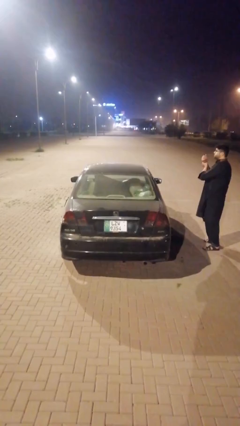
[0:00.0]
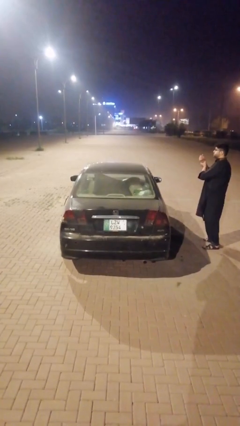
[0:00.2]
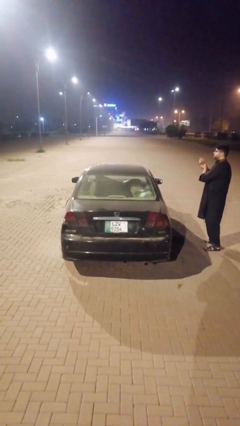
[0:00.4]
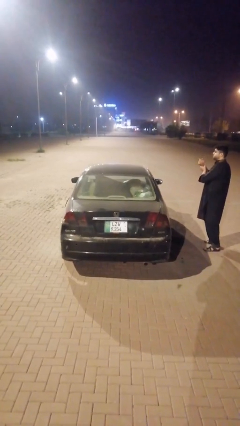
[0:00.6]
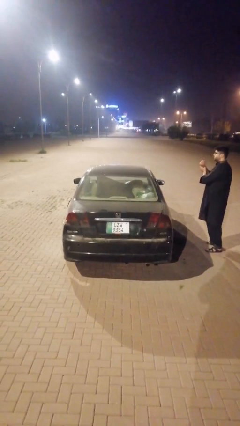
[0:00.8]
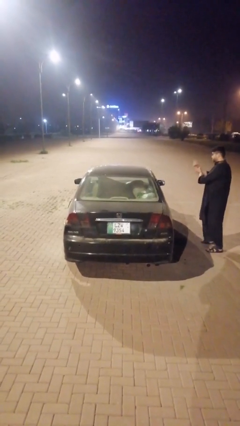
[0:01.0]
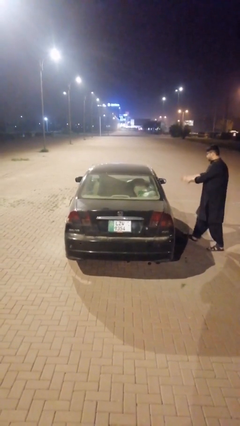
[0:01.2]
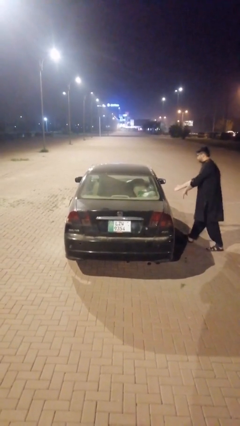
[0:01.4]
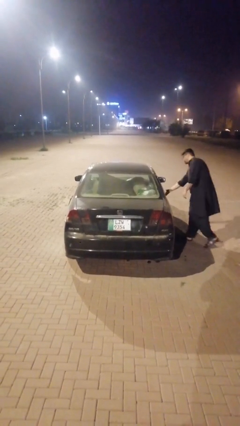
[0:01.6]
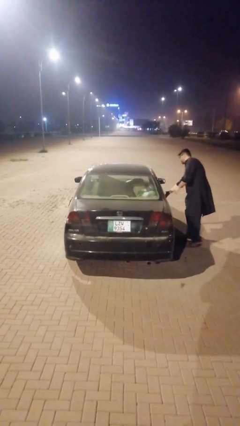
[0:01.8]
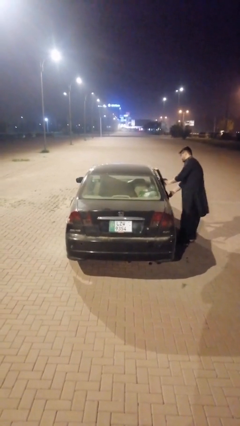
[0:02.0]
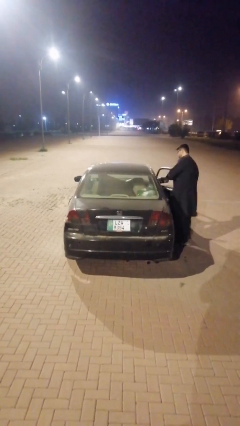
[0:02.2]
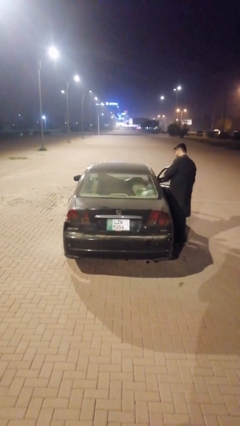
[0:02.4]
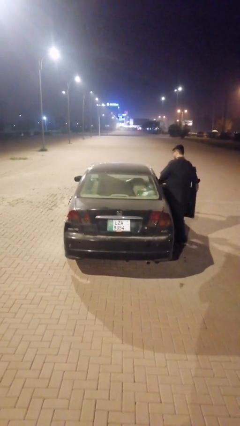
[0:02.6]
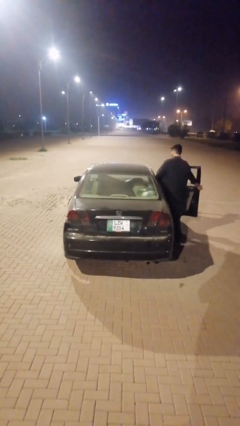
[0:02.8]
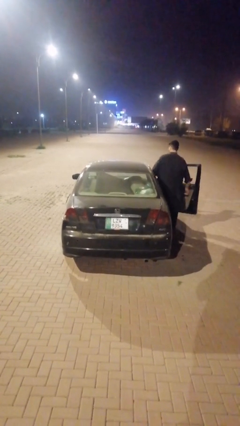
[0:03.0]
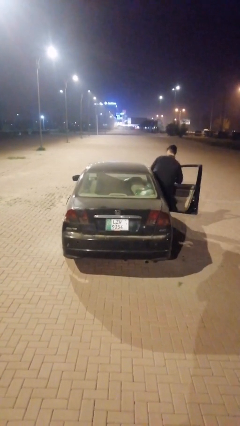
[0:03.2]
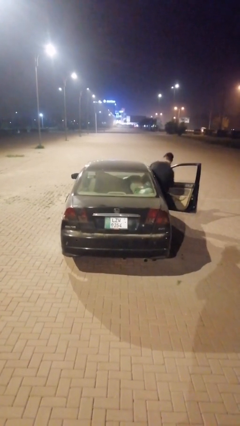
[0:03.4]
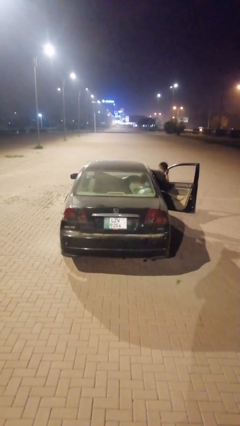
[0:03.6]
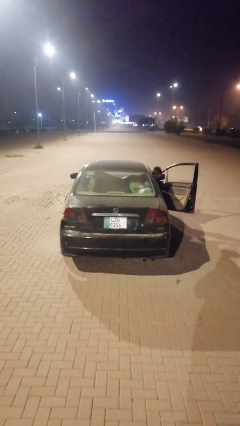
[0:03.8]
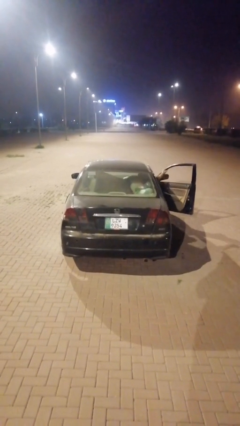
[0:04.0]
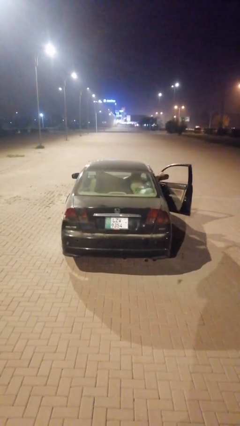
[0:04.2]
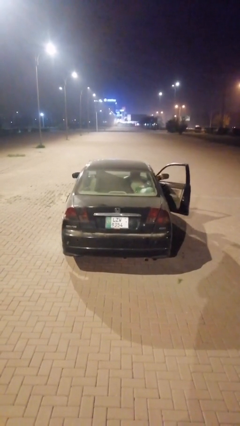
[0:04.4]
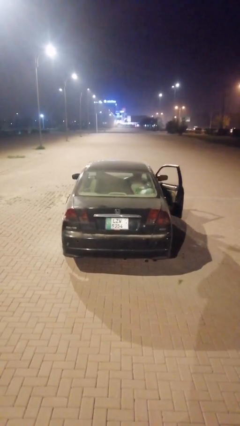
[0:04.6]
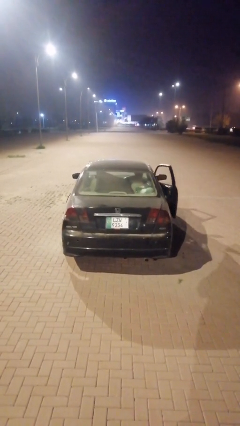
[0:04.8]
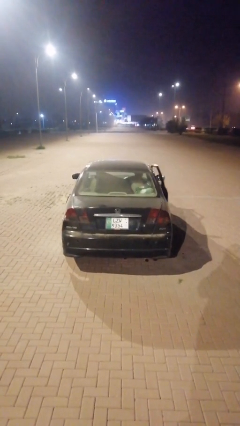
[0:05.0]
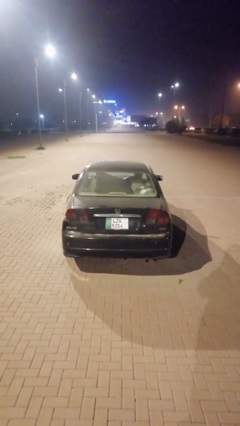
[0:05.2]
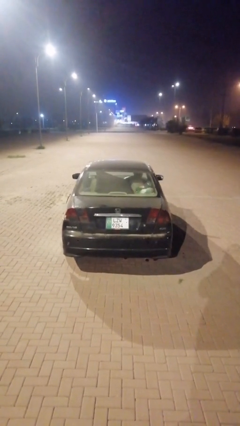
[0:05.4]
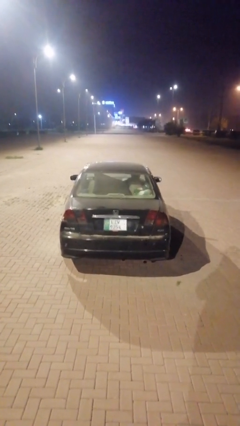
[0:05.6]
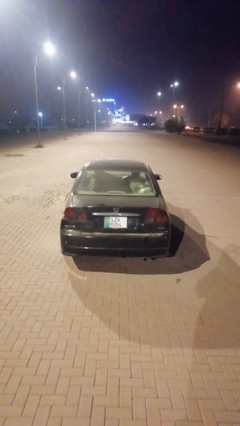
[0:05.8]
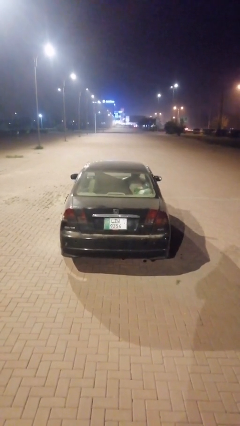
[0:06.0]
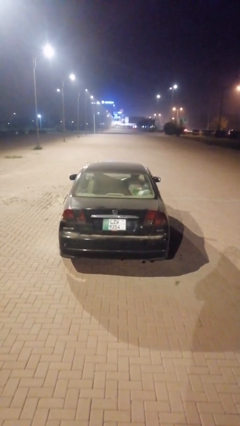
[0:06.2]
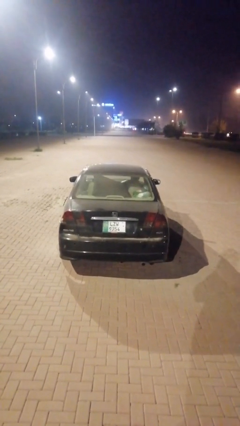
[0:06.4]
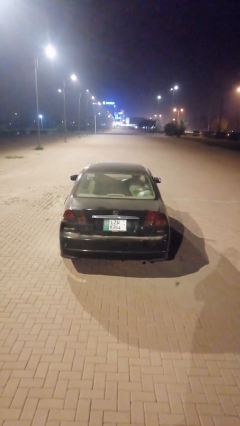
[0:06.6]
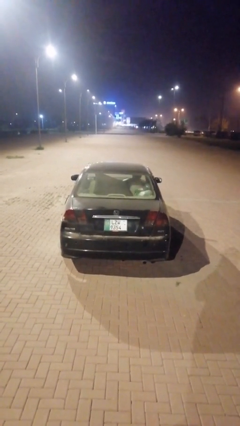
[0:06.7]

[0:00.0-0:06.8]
car picks up person

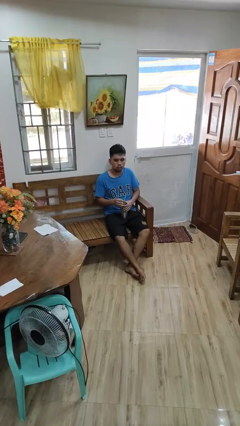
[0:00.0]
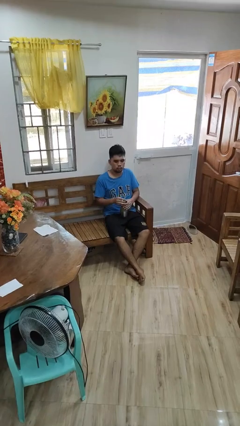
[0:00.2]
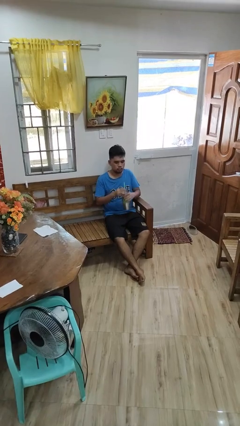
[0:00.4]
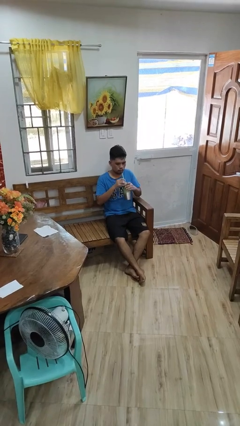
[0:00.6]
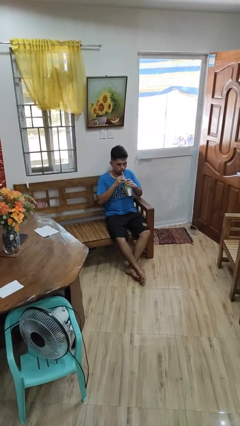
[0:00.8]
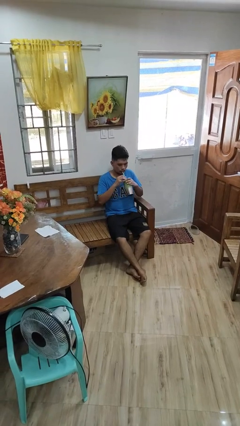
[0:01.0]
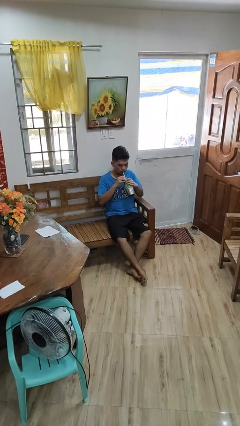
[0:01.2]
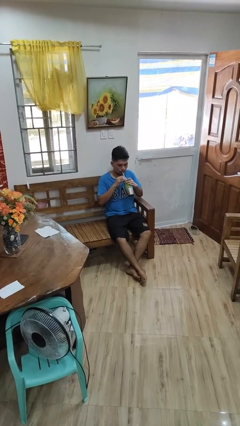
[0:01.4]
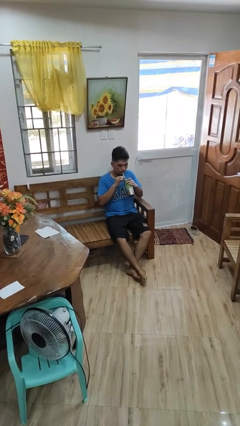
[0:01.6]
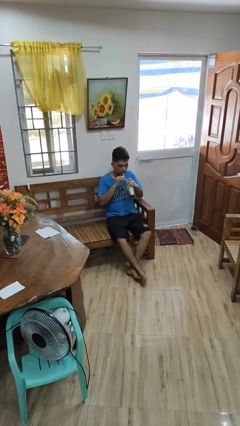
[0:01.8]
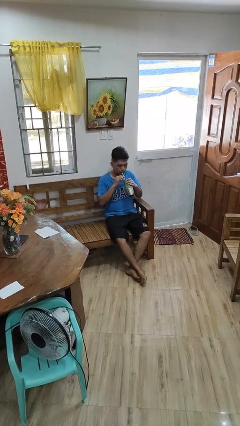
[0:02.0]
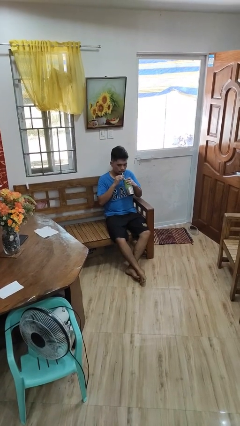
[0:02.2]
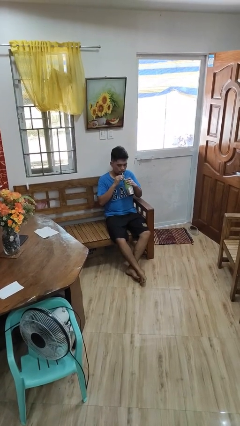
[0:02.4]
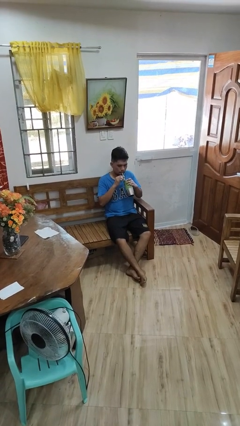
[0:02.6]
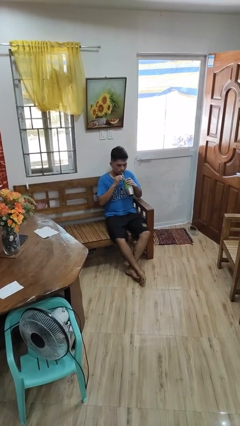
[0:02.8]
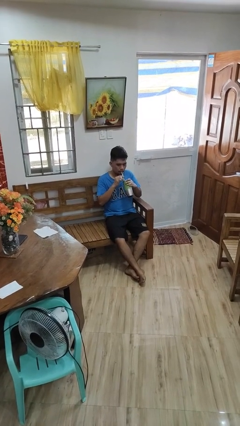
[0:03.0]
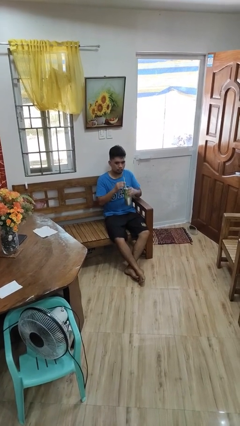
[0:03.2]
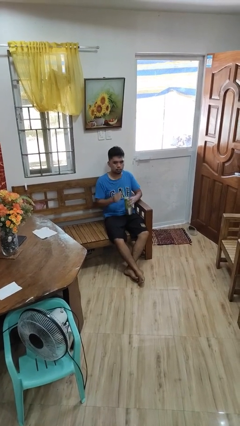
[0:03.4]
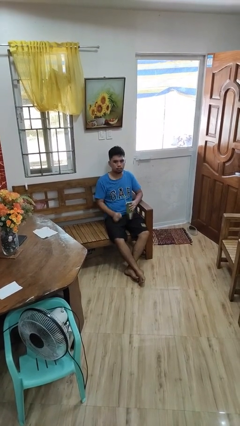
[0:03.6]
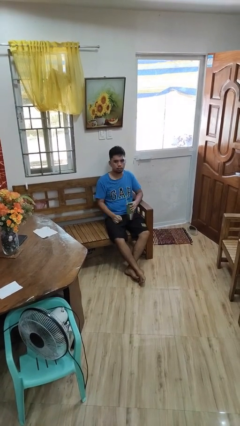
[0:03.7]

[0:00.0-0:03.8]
person drinks from straw

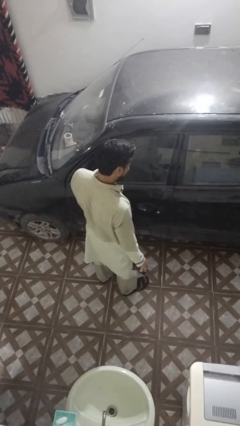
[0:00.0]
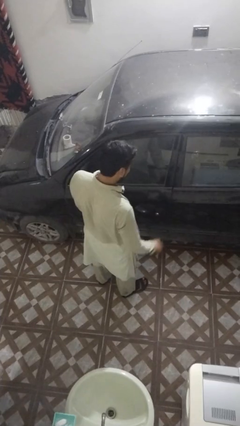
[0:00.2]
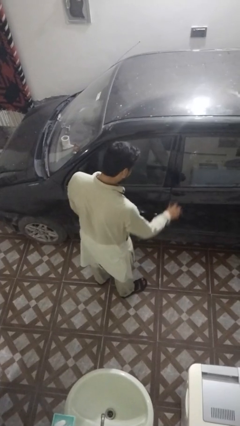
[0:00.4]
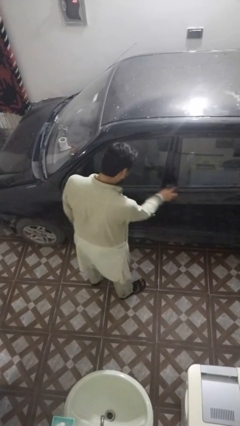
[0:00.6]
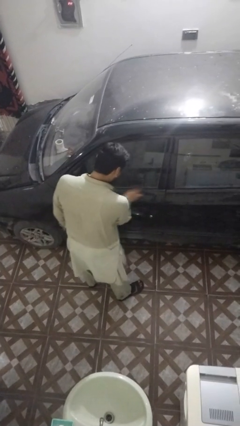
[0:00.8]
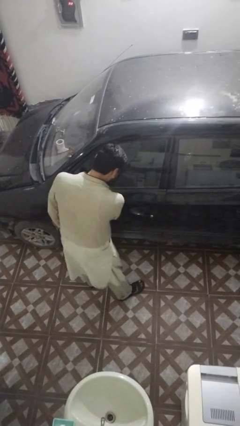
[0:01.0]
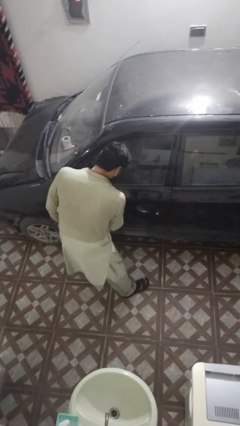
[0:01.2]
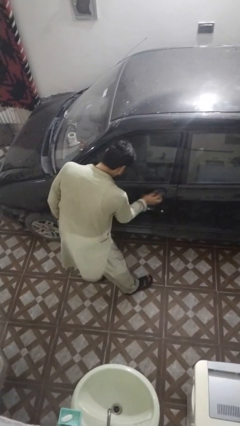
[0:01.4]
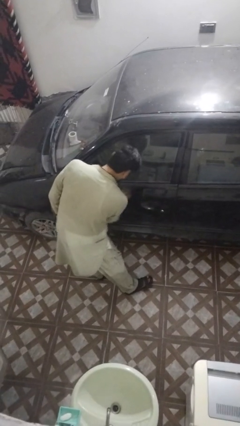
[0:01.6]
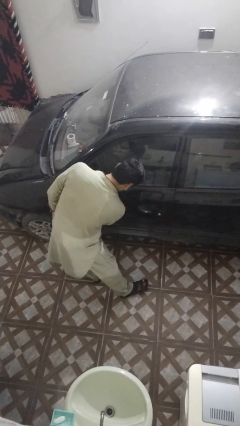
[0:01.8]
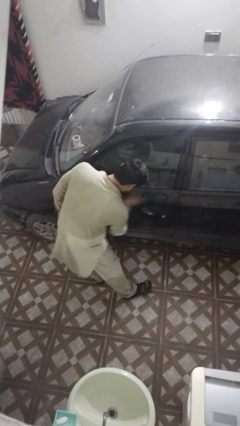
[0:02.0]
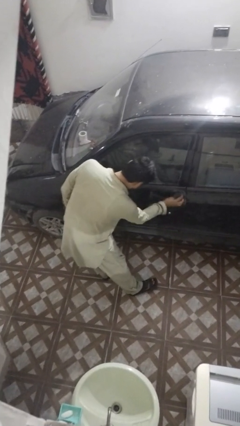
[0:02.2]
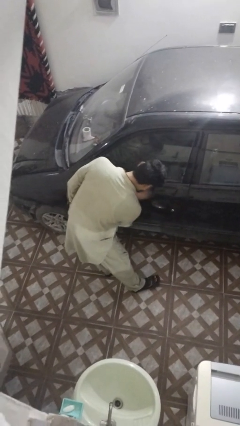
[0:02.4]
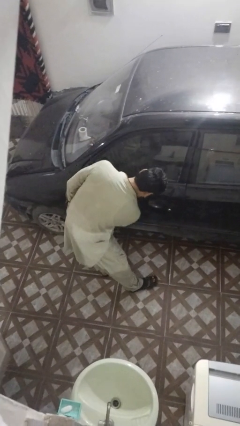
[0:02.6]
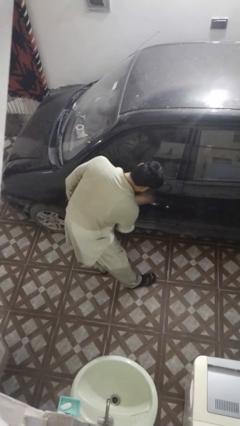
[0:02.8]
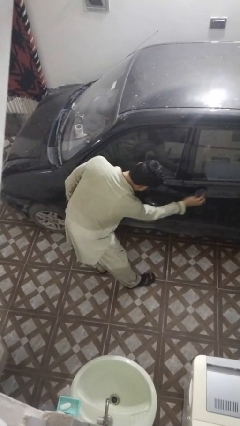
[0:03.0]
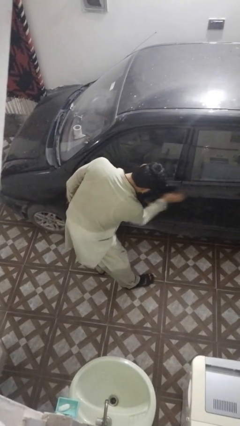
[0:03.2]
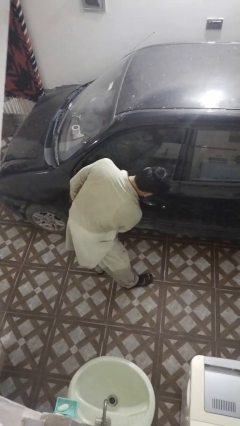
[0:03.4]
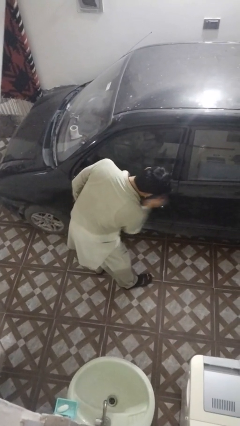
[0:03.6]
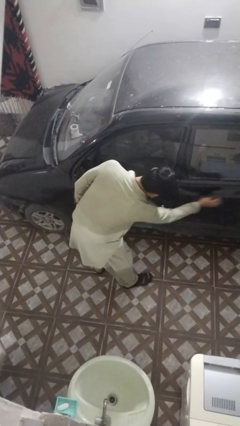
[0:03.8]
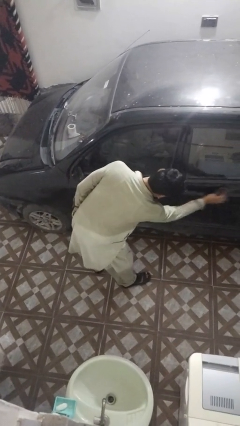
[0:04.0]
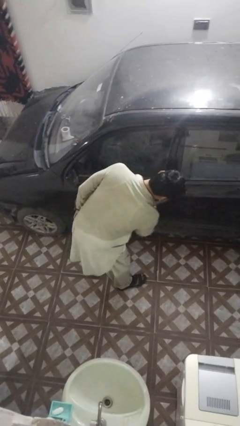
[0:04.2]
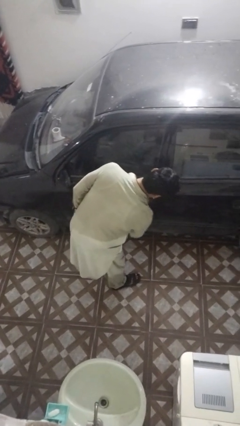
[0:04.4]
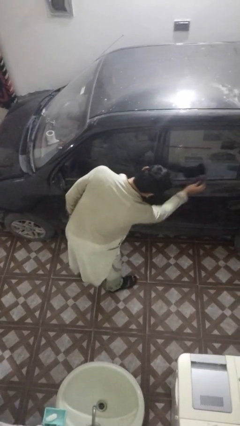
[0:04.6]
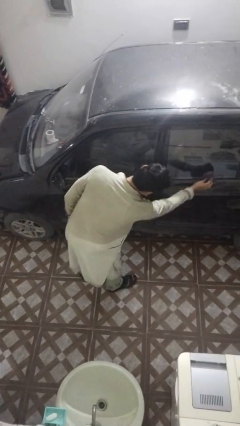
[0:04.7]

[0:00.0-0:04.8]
person polishes car with rag

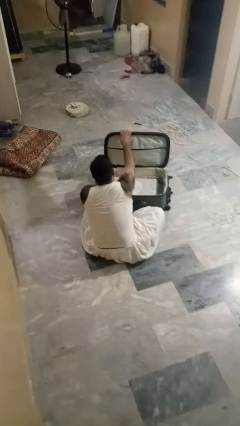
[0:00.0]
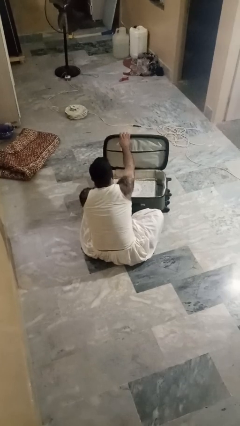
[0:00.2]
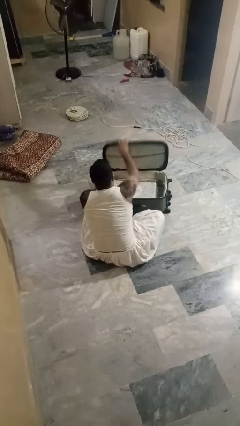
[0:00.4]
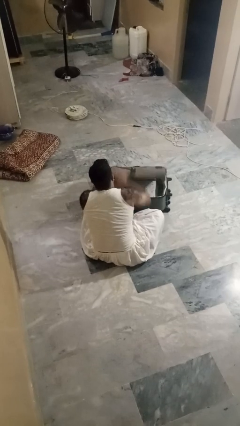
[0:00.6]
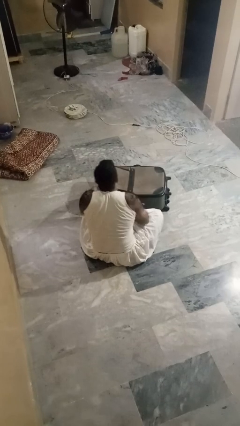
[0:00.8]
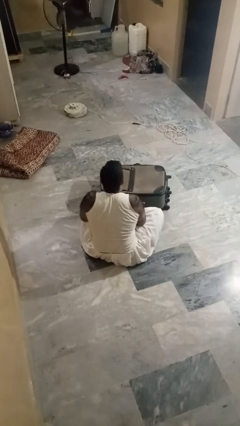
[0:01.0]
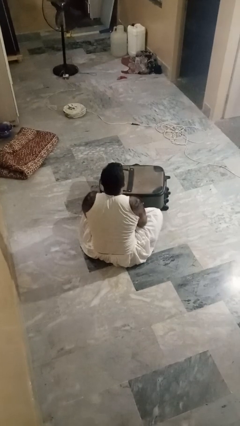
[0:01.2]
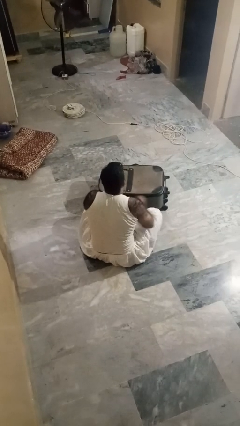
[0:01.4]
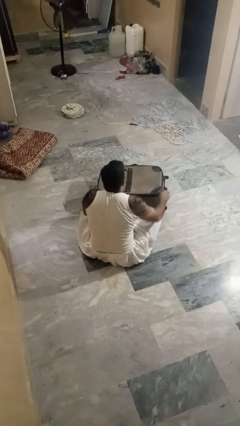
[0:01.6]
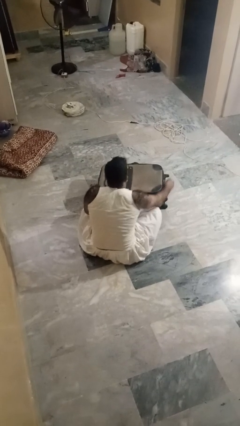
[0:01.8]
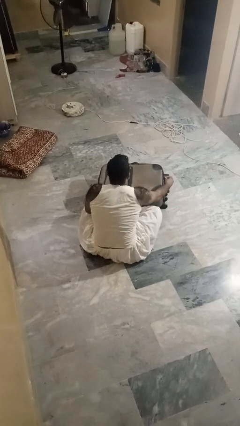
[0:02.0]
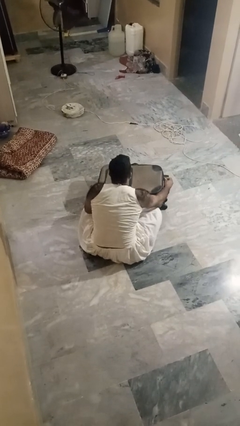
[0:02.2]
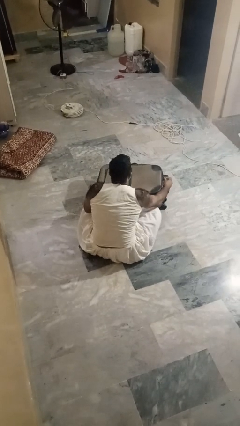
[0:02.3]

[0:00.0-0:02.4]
person closes suitcase
